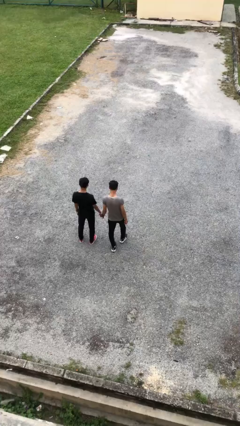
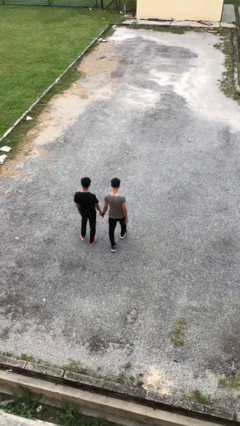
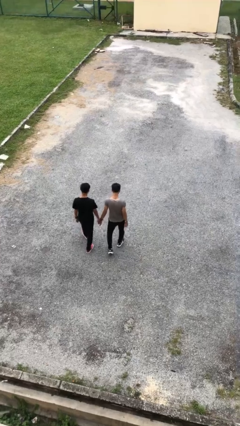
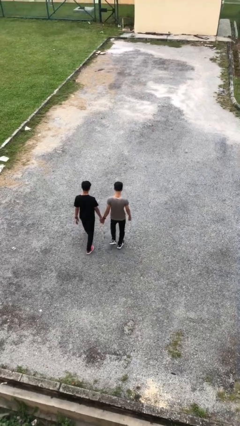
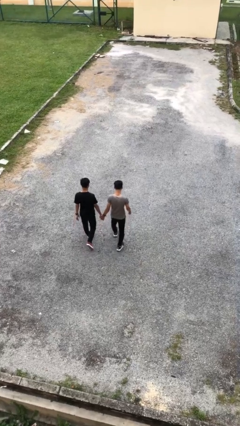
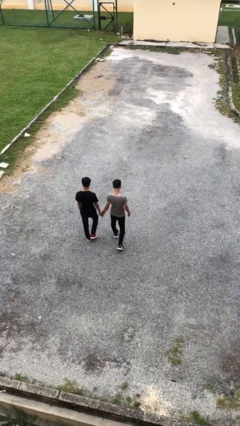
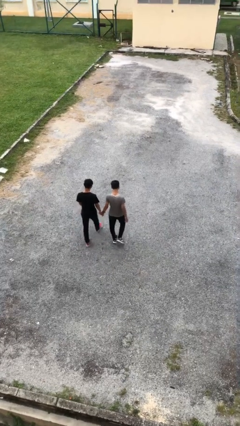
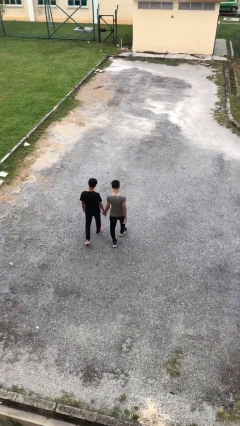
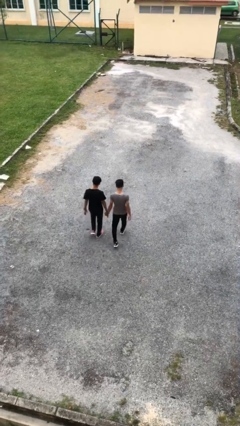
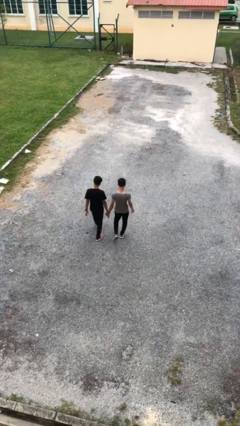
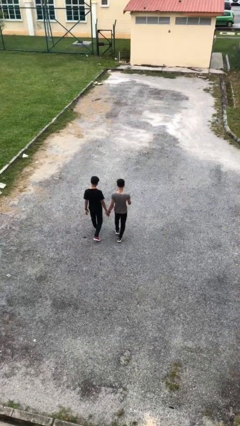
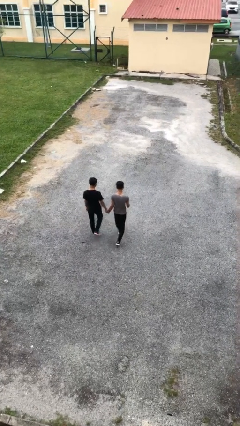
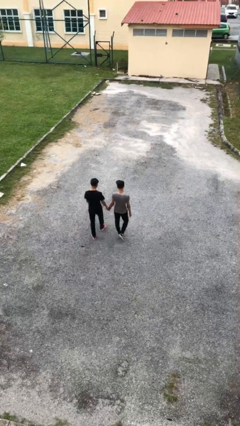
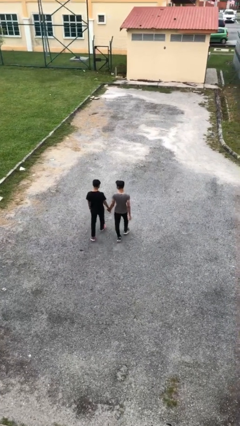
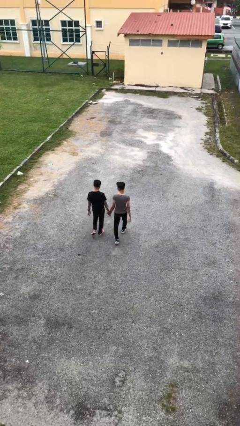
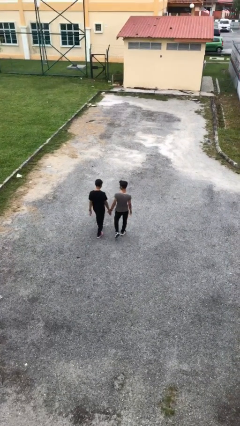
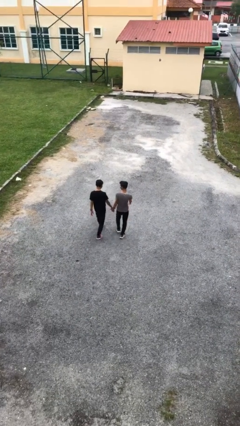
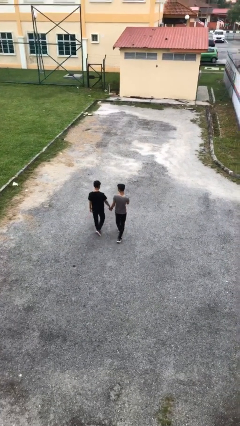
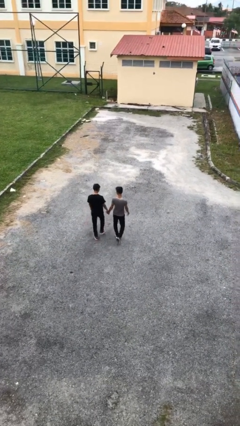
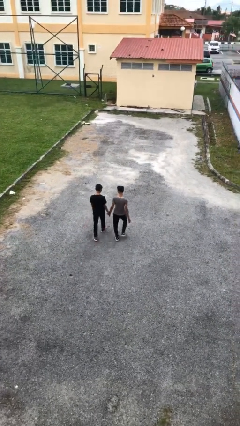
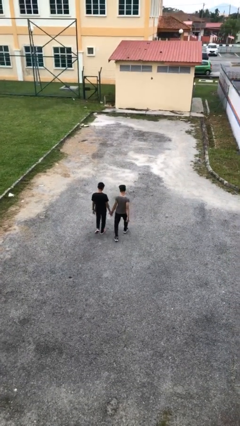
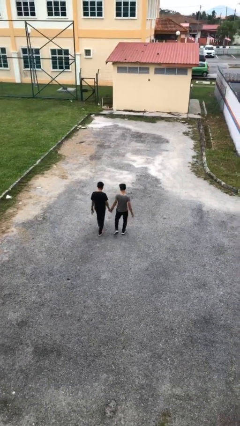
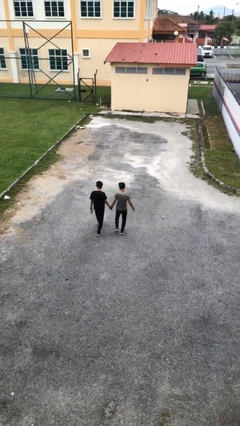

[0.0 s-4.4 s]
person holds hand

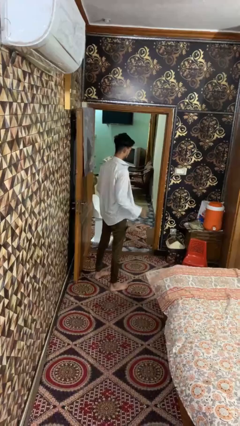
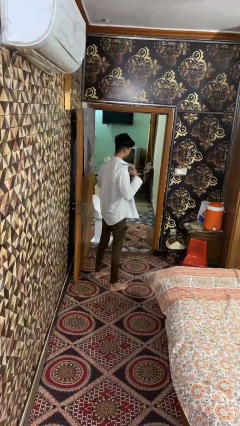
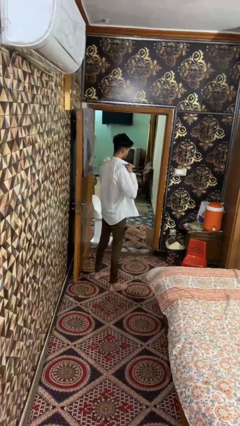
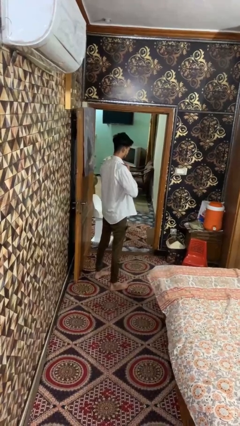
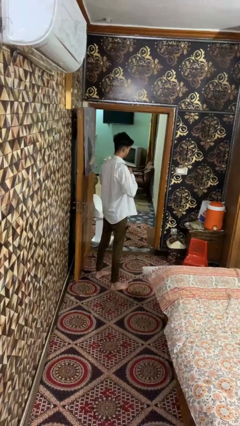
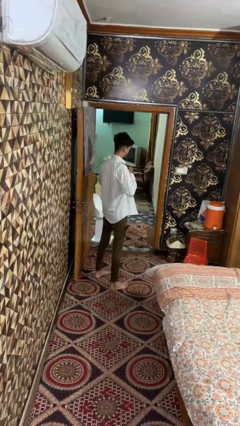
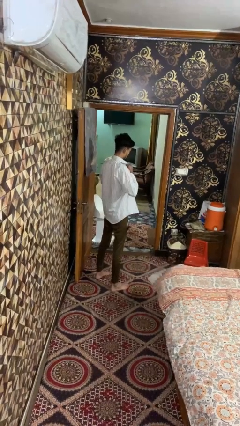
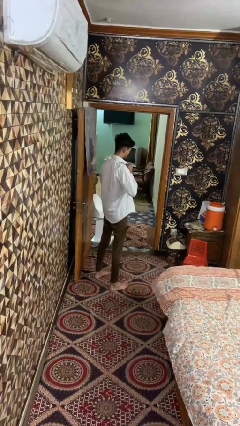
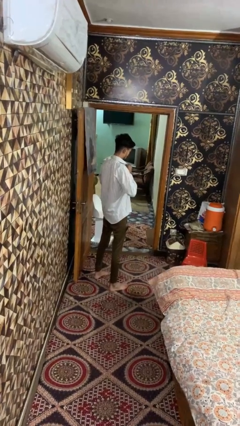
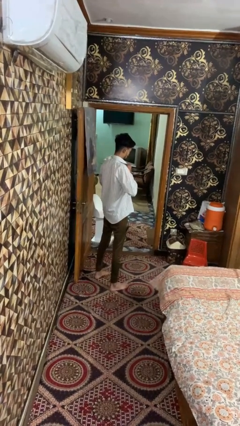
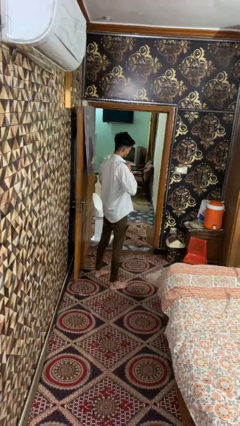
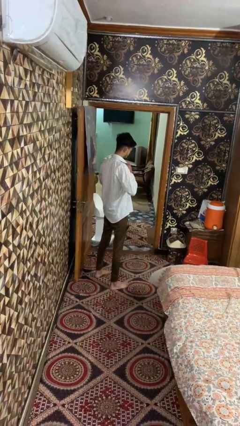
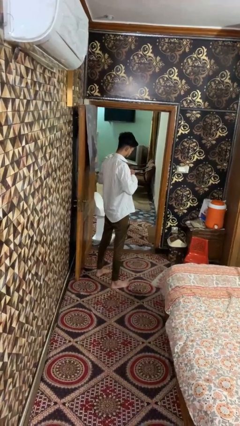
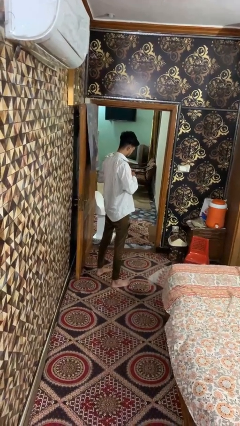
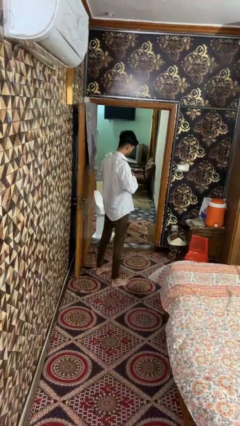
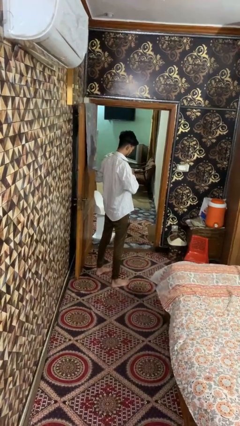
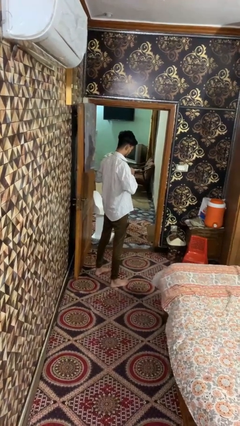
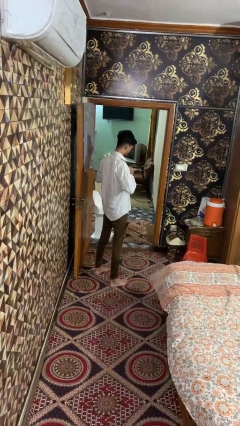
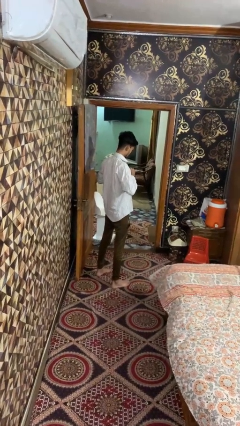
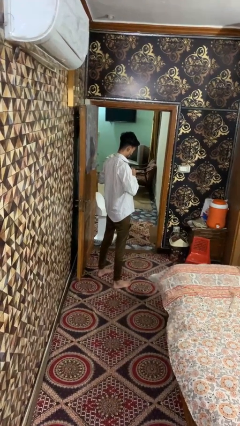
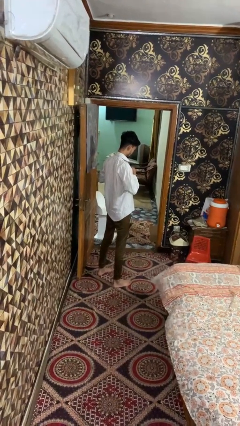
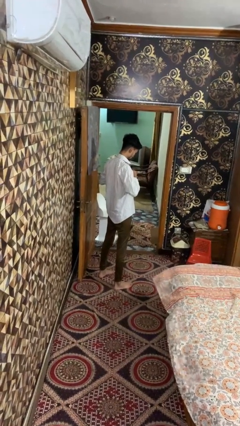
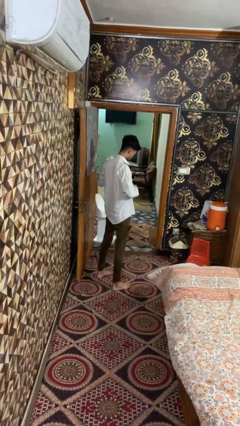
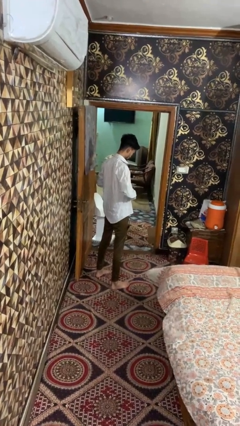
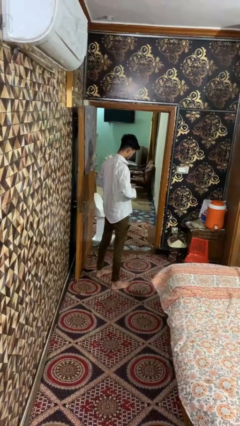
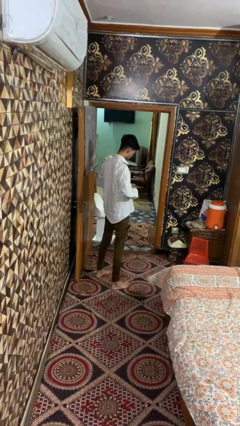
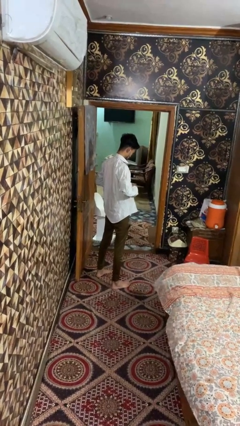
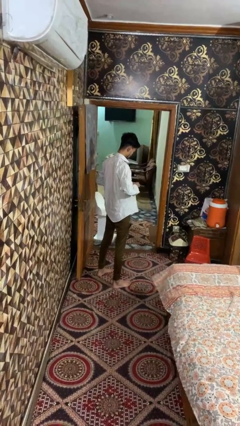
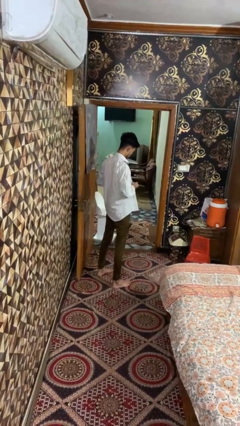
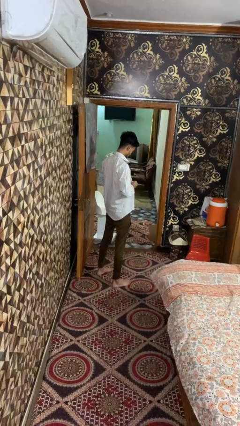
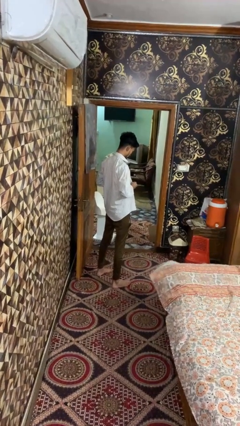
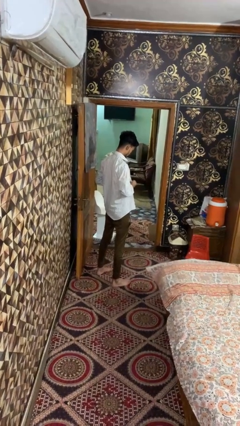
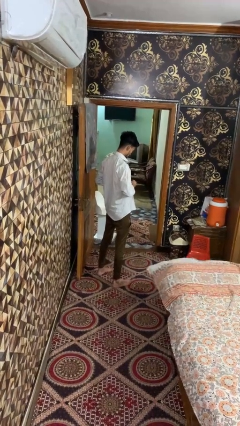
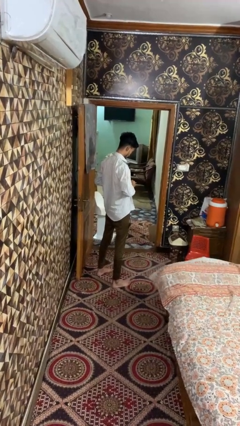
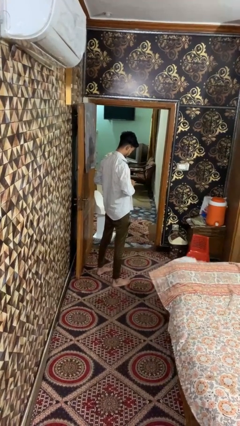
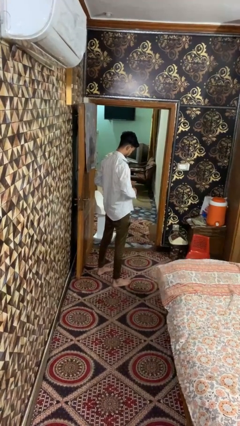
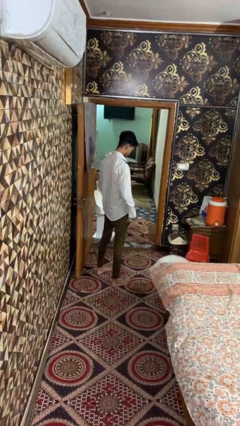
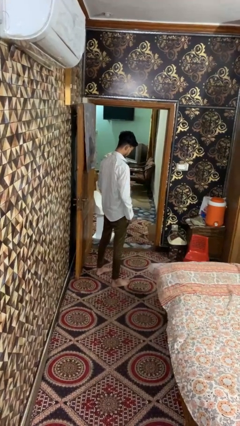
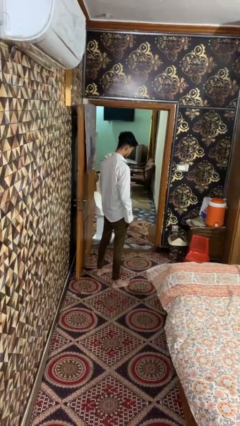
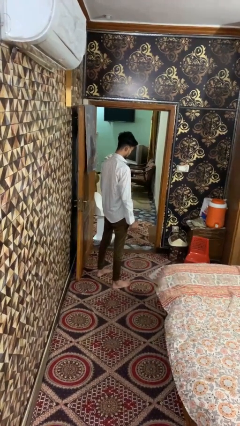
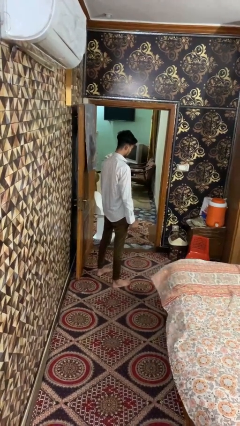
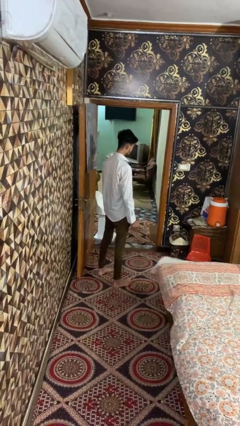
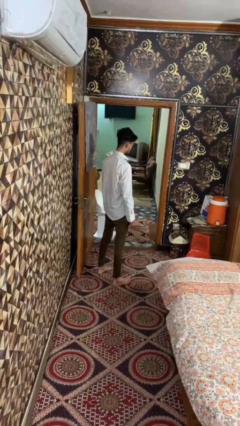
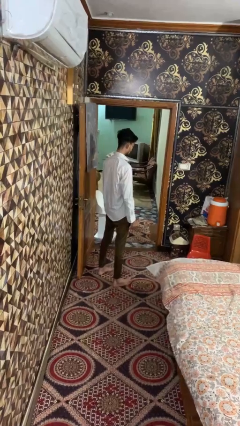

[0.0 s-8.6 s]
person buttons shirt

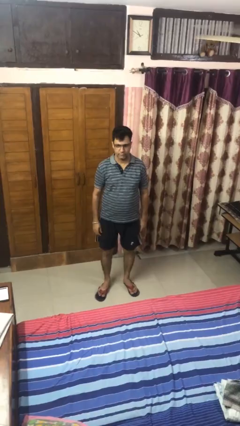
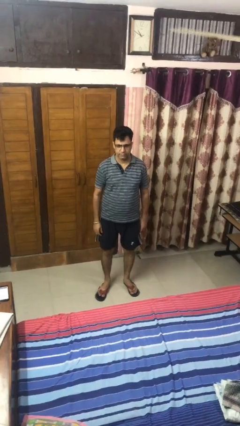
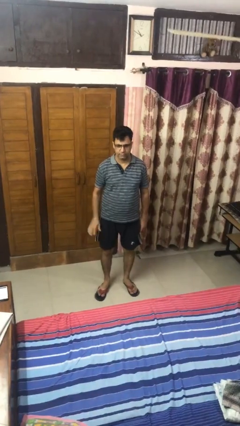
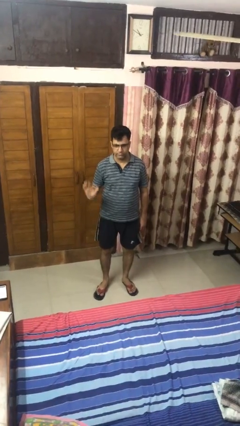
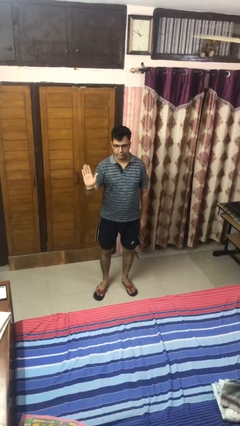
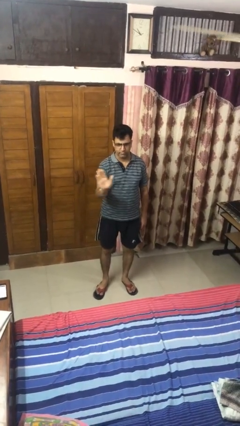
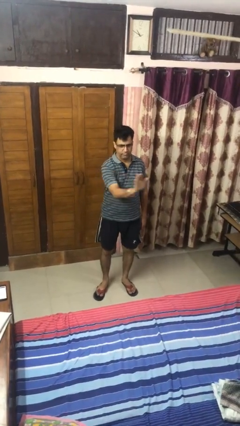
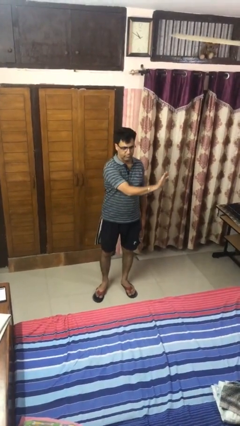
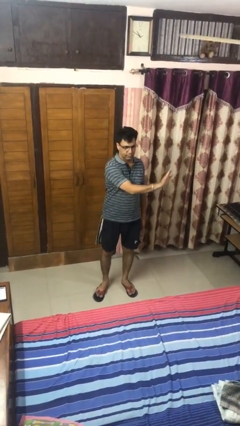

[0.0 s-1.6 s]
person gestures swipe left

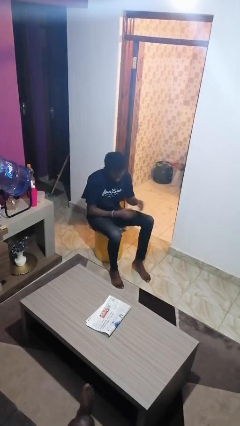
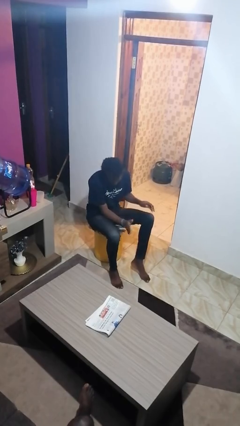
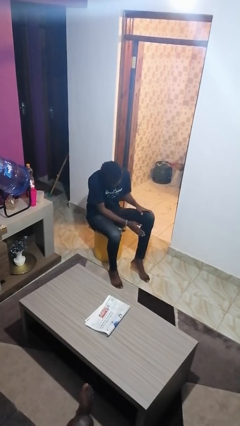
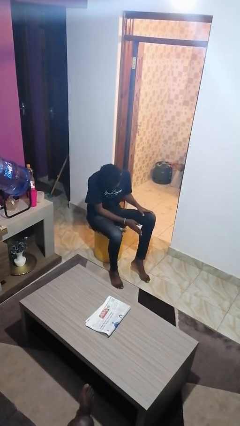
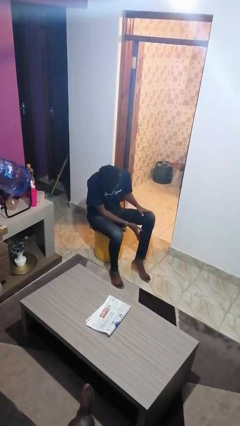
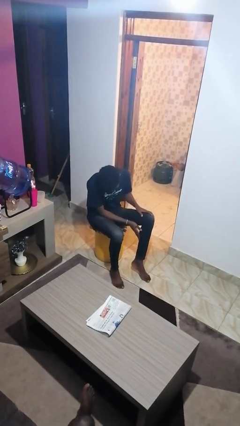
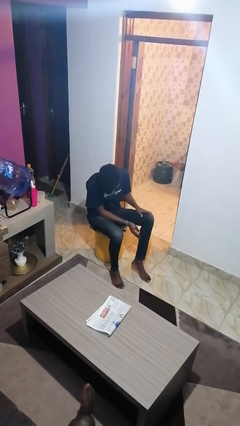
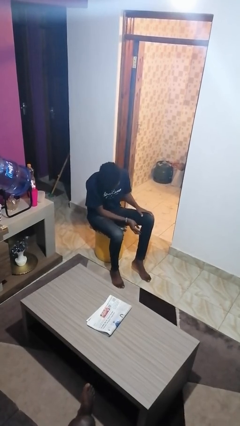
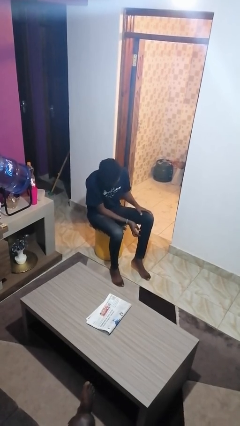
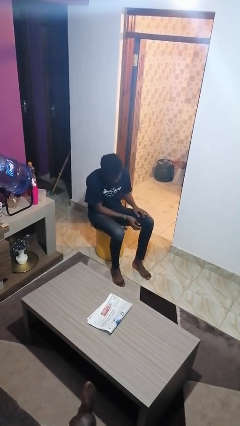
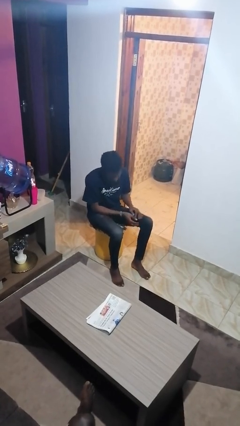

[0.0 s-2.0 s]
person swats bug

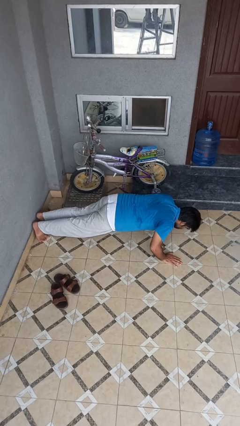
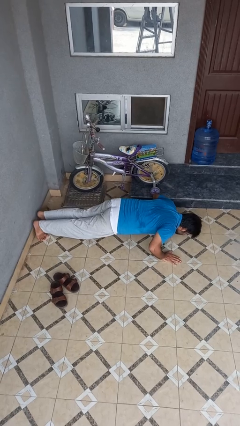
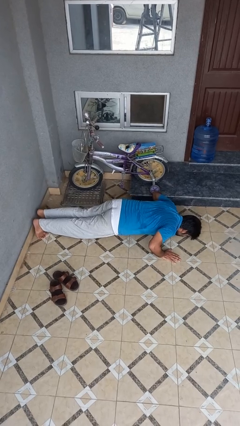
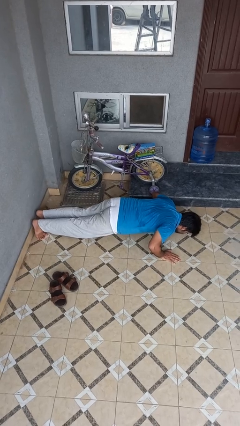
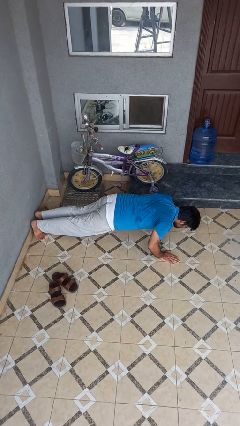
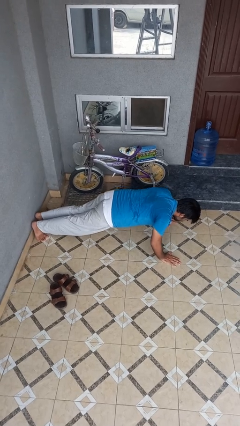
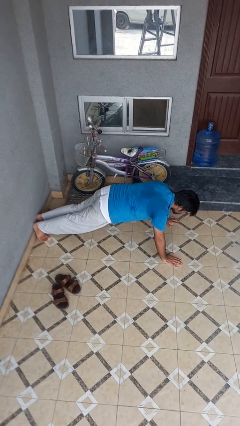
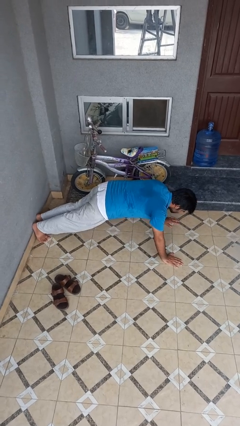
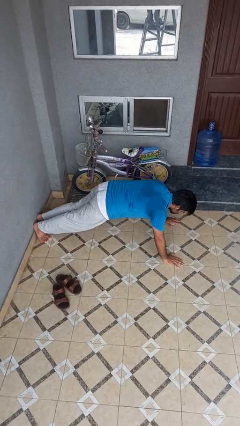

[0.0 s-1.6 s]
person exercises with pushup
